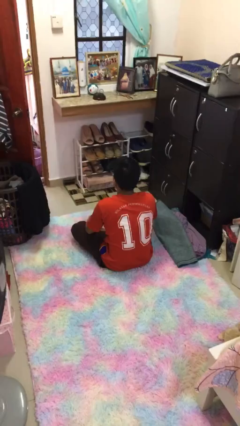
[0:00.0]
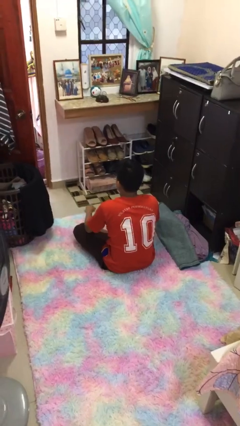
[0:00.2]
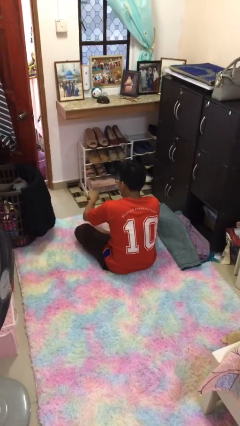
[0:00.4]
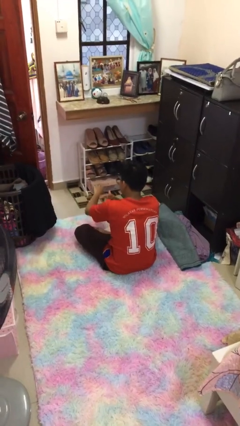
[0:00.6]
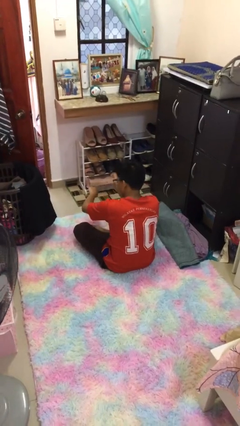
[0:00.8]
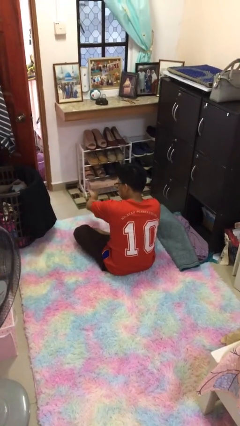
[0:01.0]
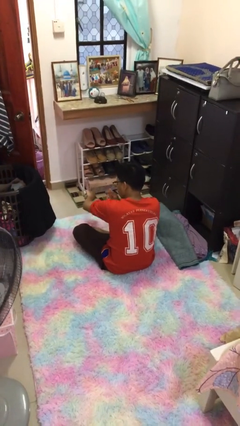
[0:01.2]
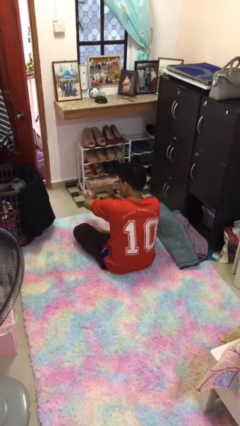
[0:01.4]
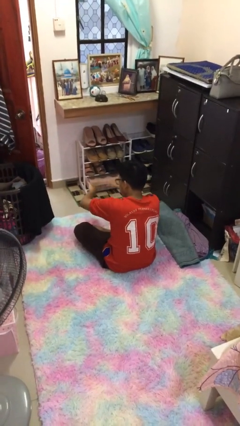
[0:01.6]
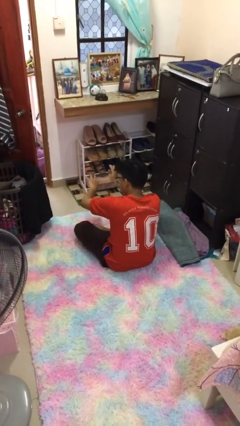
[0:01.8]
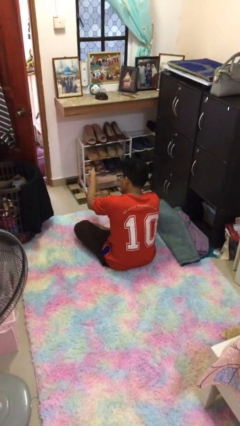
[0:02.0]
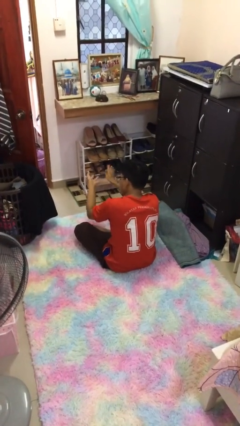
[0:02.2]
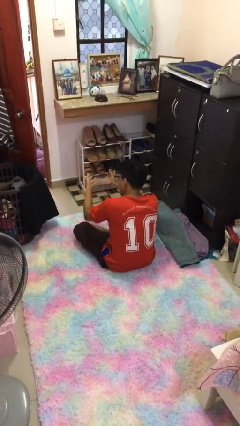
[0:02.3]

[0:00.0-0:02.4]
person swats bug

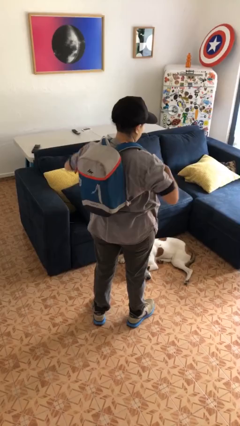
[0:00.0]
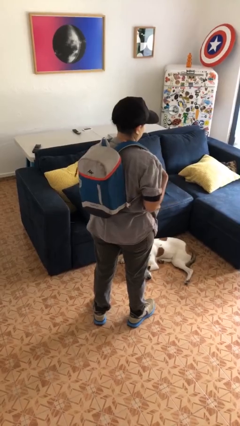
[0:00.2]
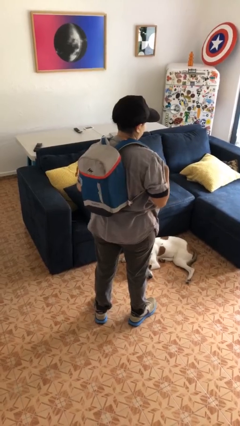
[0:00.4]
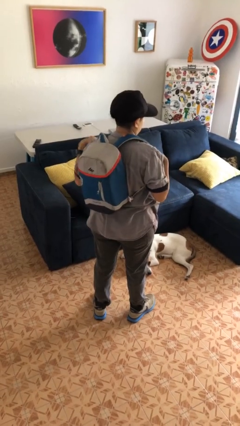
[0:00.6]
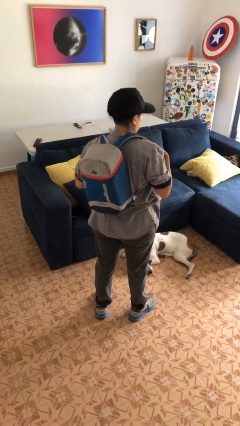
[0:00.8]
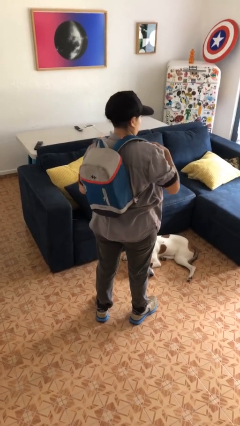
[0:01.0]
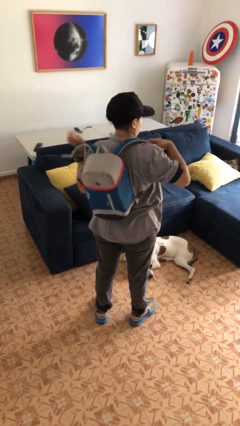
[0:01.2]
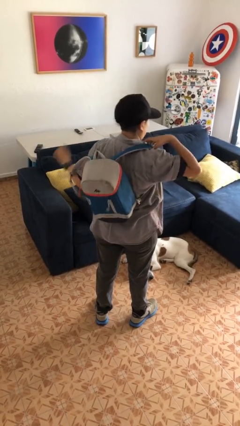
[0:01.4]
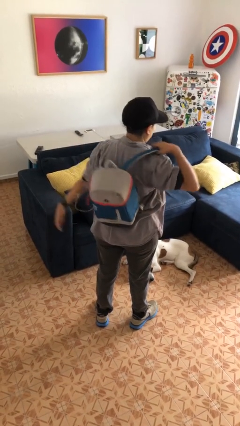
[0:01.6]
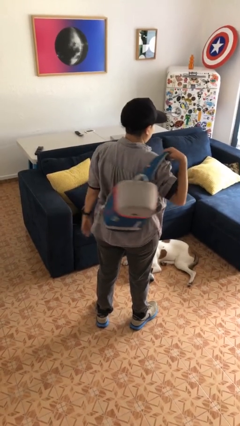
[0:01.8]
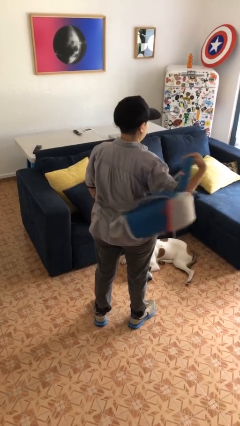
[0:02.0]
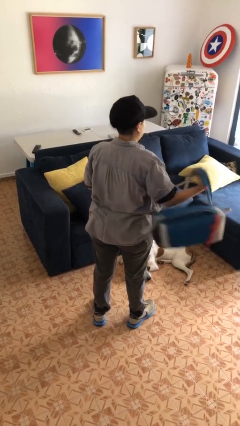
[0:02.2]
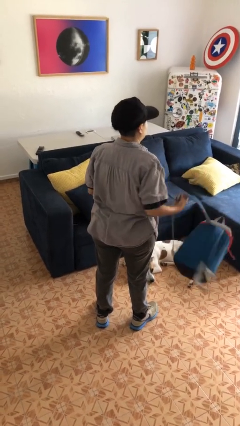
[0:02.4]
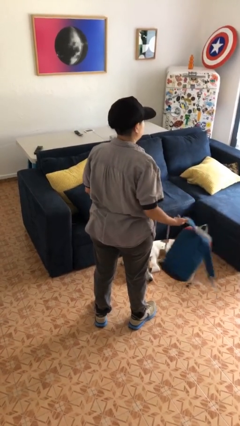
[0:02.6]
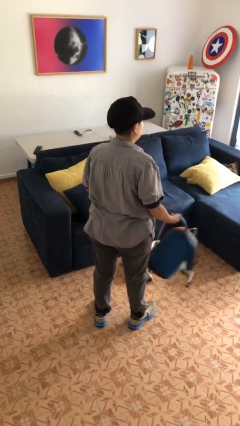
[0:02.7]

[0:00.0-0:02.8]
person takes off backpack

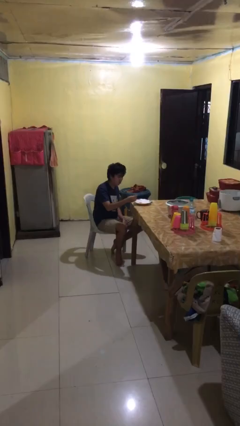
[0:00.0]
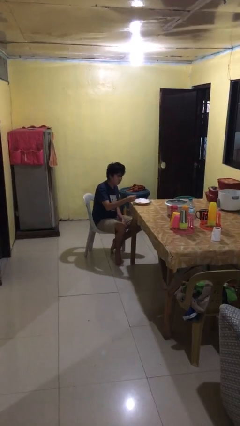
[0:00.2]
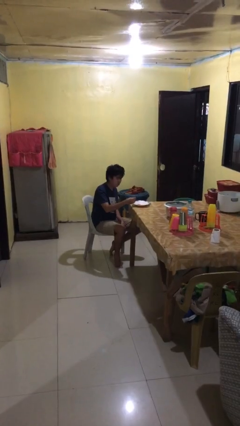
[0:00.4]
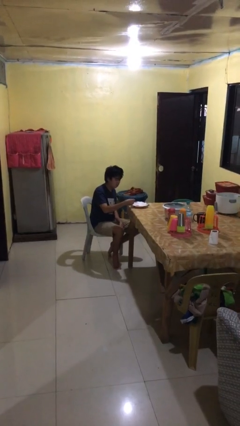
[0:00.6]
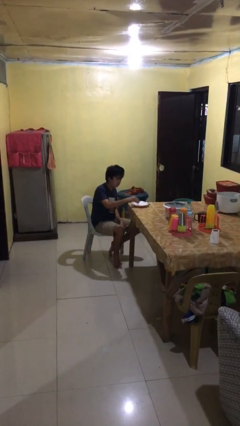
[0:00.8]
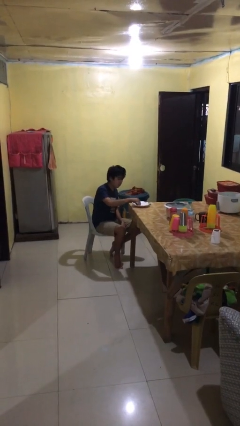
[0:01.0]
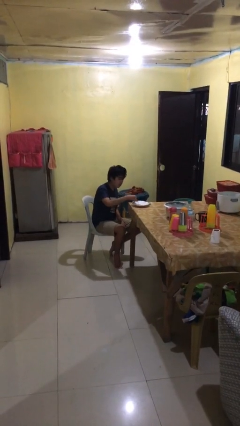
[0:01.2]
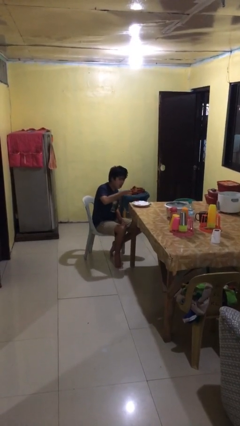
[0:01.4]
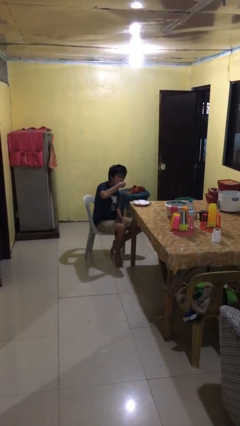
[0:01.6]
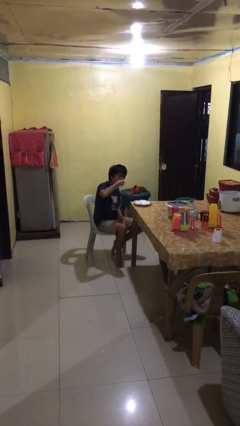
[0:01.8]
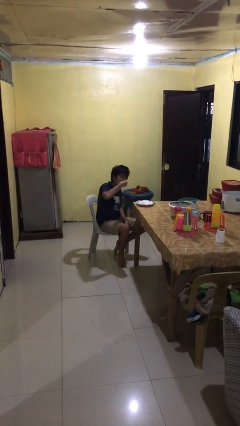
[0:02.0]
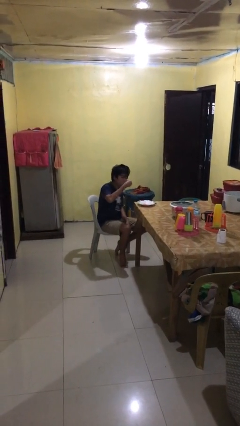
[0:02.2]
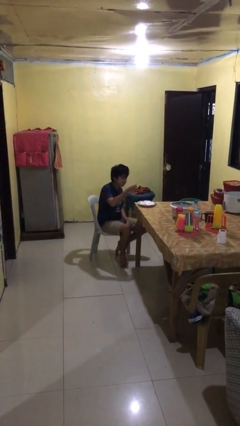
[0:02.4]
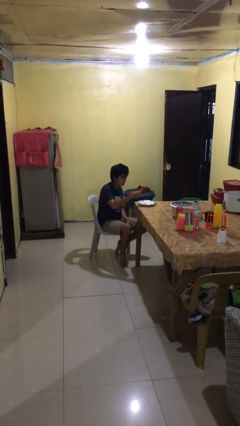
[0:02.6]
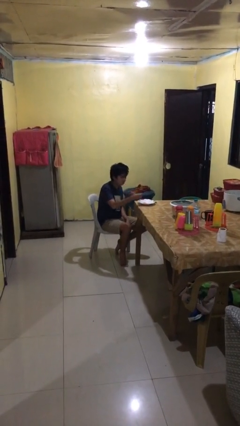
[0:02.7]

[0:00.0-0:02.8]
person eats with hands

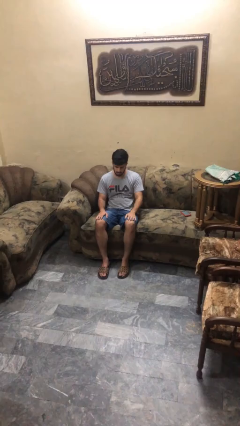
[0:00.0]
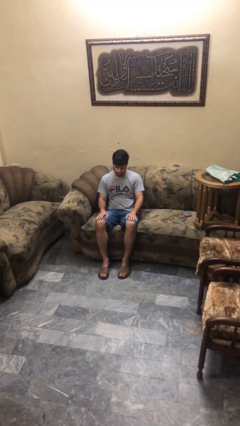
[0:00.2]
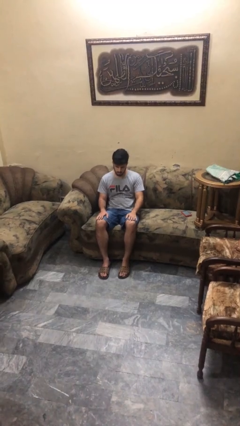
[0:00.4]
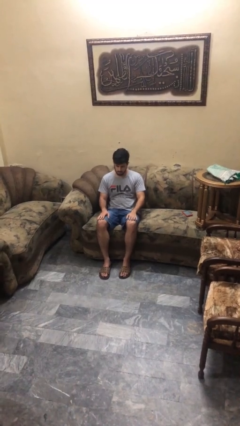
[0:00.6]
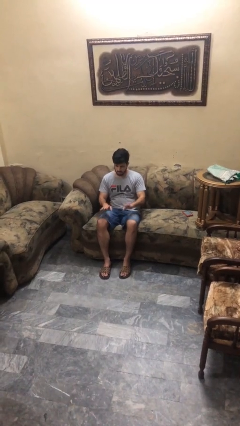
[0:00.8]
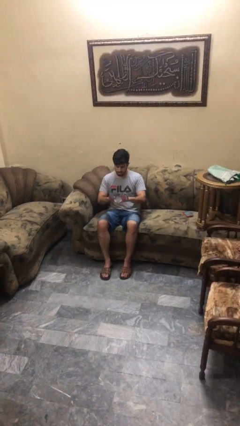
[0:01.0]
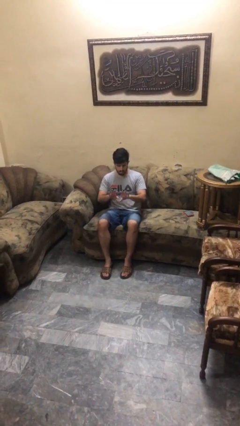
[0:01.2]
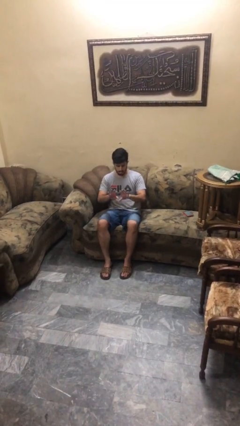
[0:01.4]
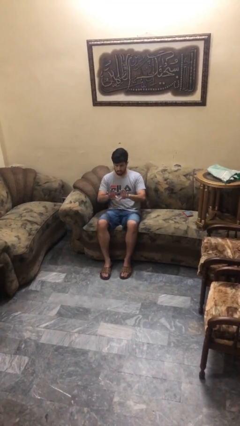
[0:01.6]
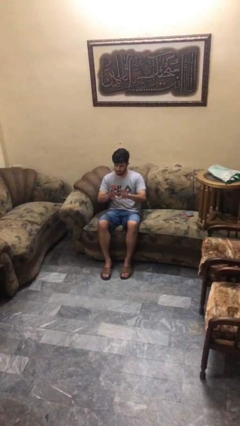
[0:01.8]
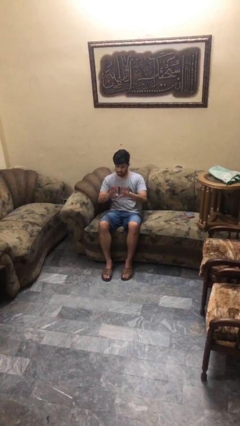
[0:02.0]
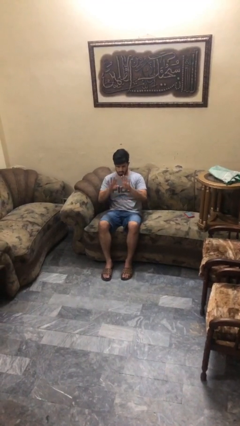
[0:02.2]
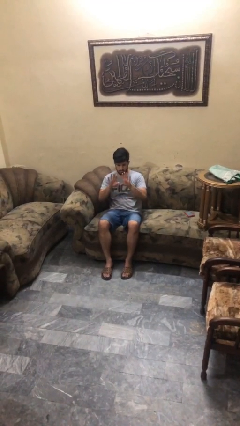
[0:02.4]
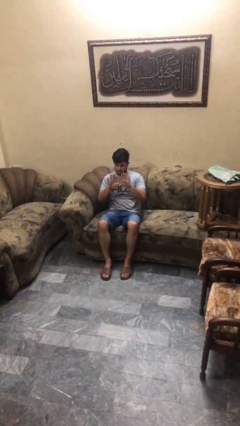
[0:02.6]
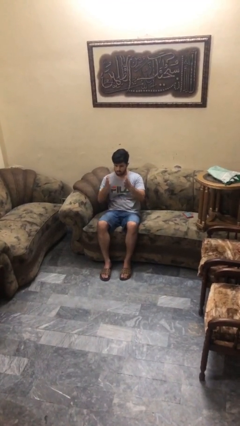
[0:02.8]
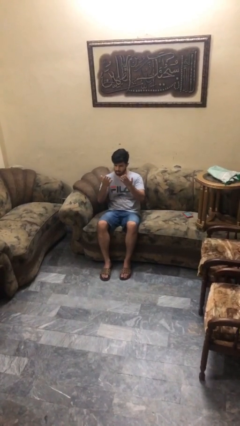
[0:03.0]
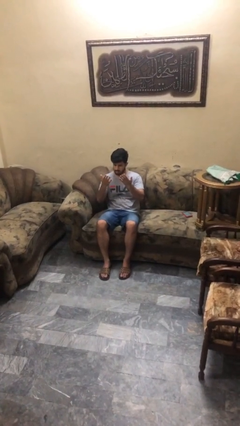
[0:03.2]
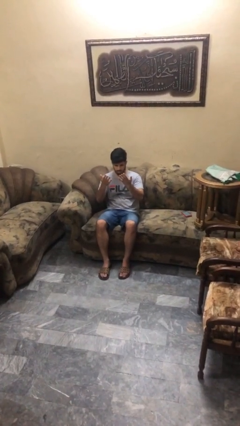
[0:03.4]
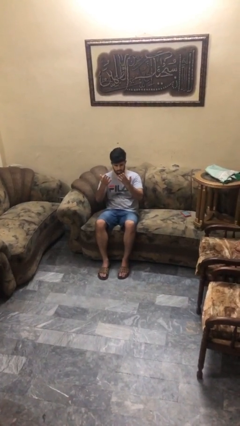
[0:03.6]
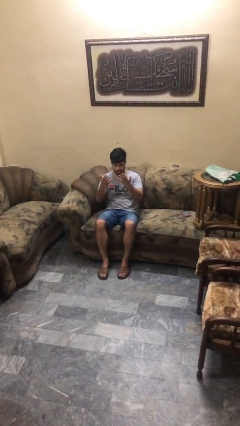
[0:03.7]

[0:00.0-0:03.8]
person looks at hands in lap

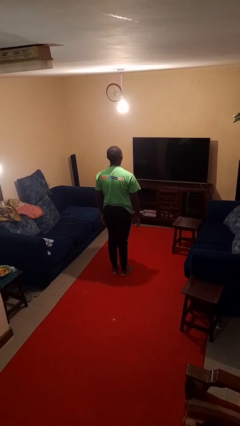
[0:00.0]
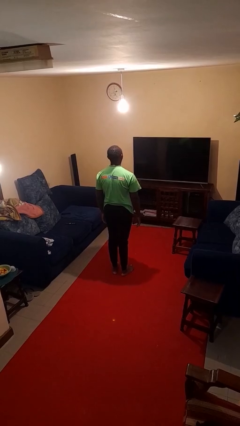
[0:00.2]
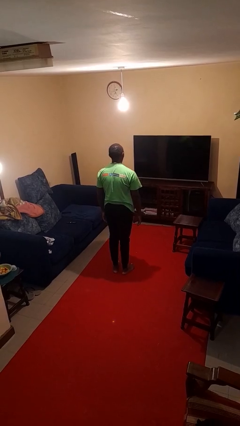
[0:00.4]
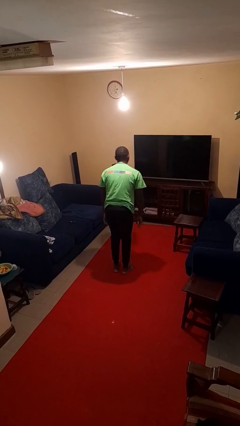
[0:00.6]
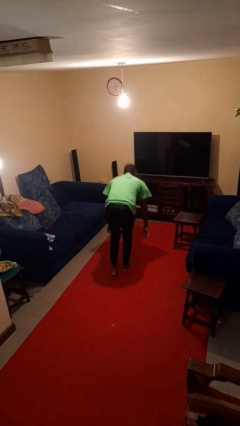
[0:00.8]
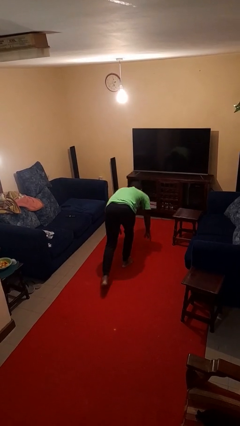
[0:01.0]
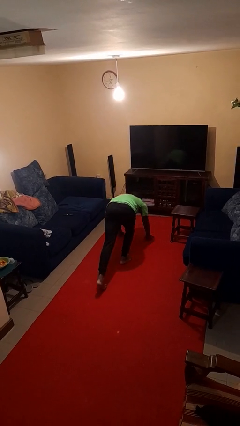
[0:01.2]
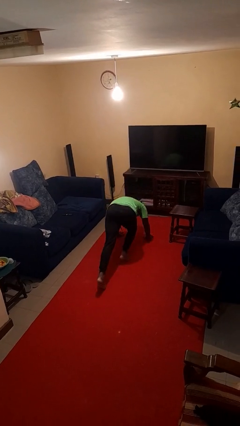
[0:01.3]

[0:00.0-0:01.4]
person exercises with plank

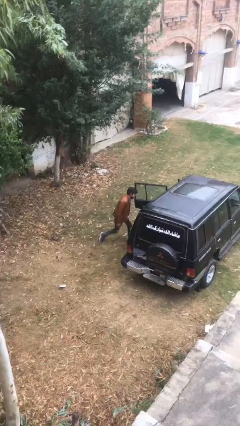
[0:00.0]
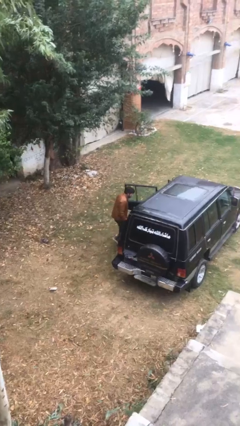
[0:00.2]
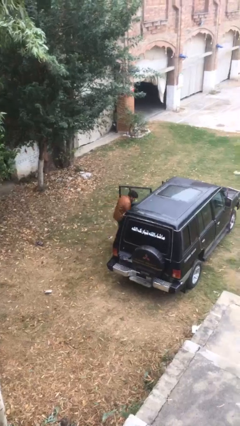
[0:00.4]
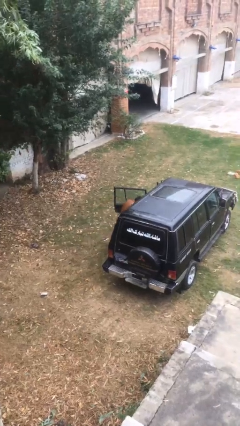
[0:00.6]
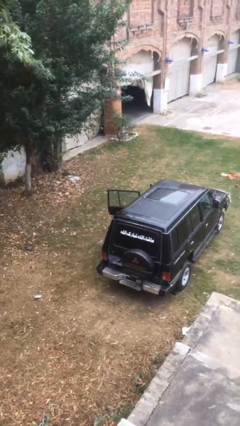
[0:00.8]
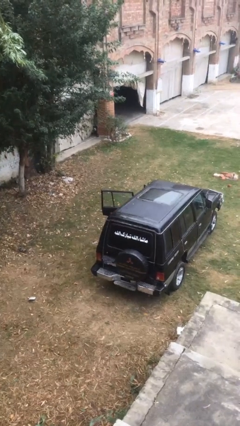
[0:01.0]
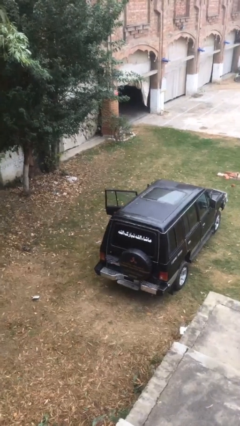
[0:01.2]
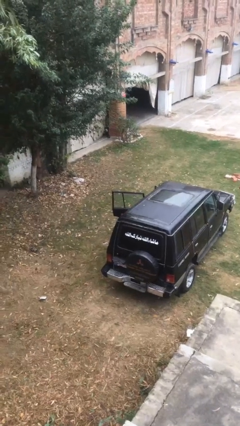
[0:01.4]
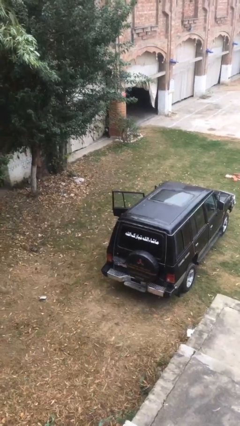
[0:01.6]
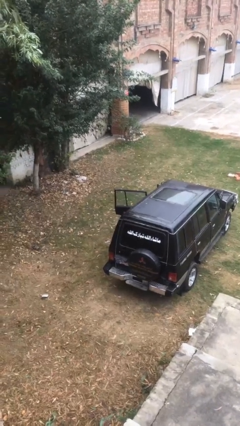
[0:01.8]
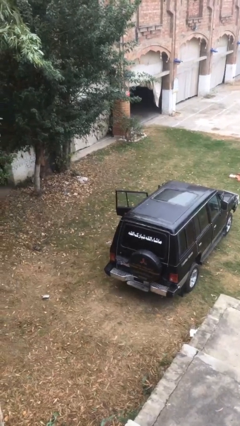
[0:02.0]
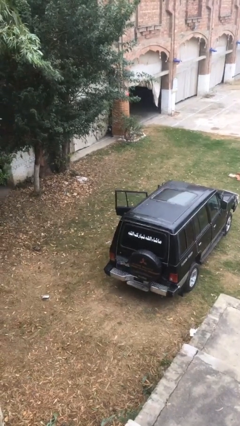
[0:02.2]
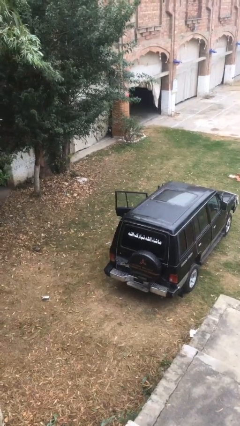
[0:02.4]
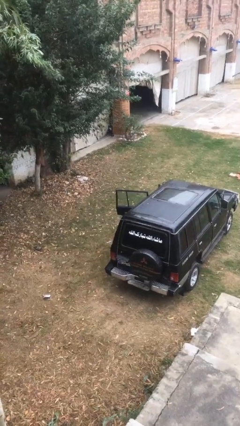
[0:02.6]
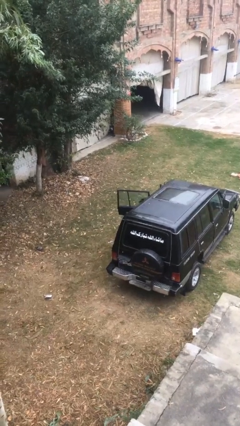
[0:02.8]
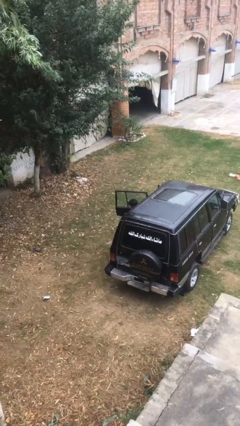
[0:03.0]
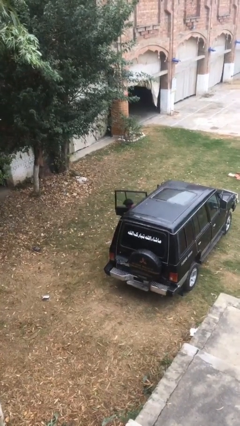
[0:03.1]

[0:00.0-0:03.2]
person enters car

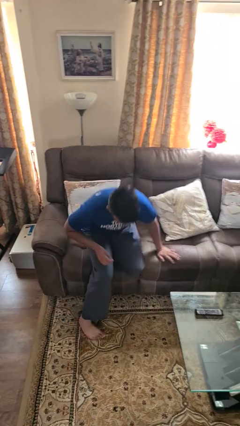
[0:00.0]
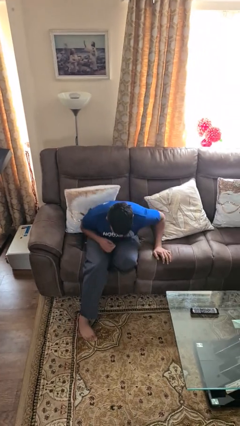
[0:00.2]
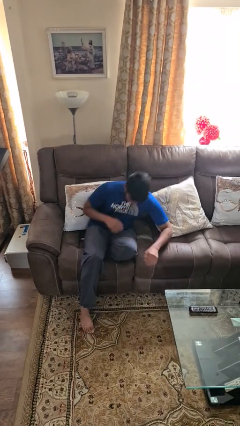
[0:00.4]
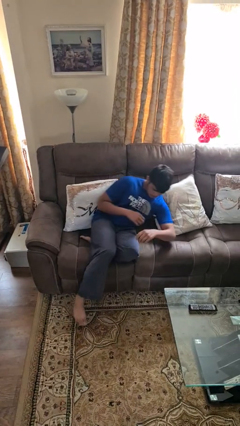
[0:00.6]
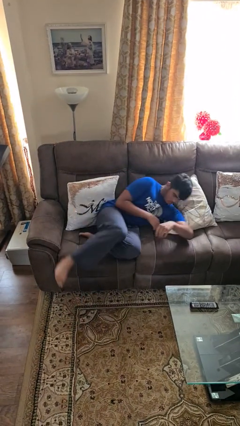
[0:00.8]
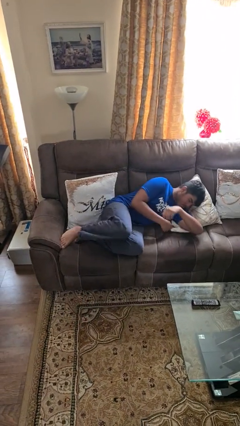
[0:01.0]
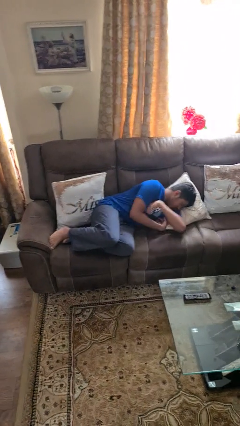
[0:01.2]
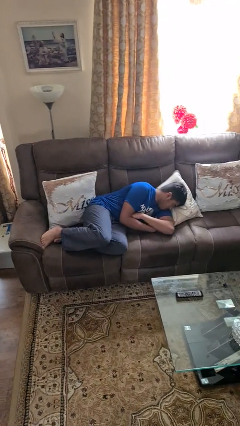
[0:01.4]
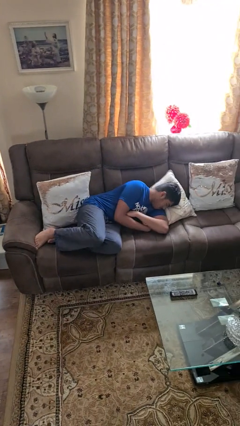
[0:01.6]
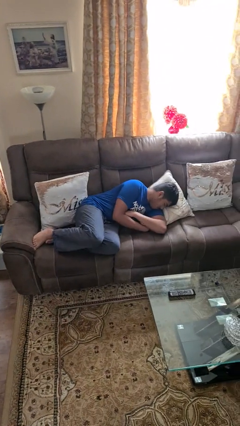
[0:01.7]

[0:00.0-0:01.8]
person lies down on couch
